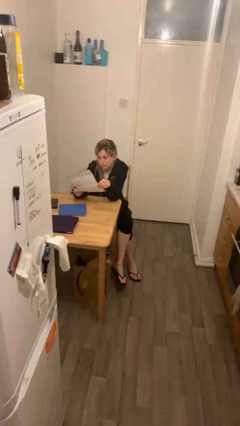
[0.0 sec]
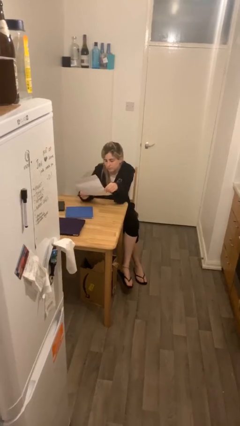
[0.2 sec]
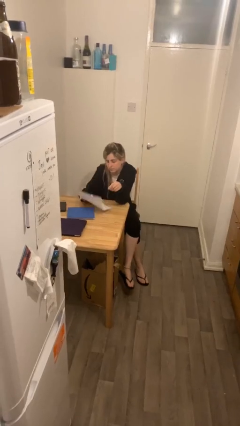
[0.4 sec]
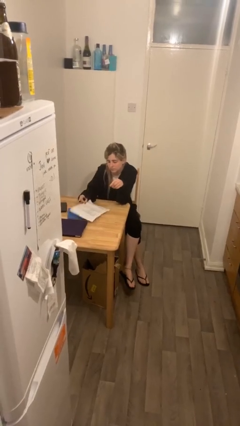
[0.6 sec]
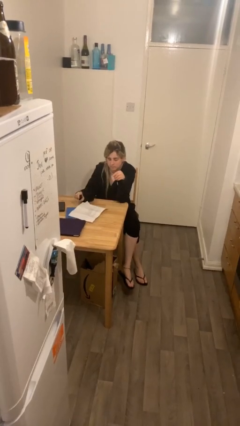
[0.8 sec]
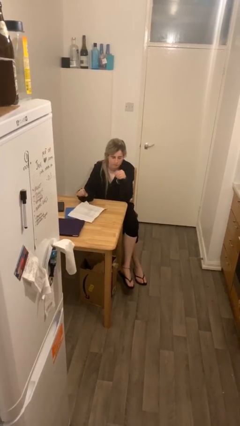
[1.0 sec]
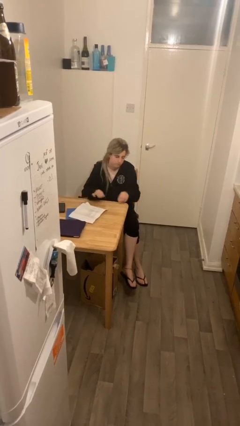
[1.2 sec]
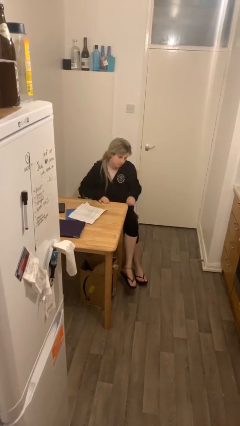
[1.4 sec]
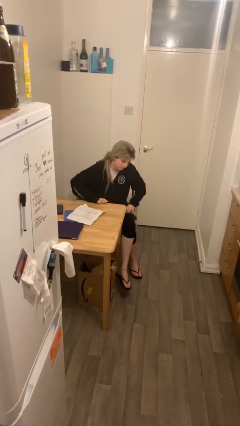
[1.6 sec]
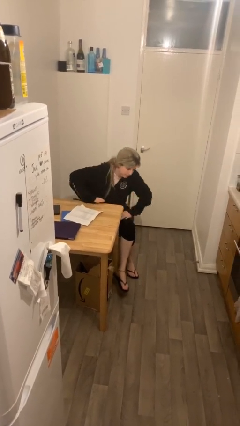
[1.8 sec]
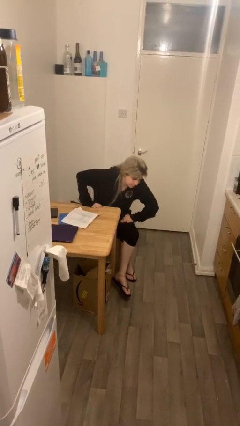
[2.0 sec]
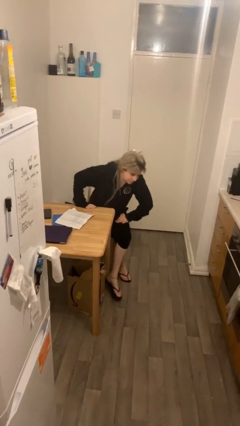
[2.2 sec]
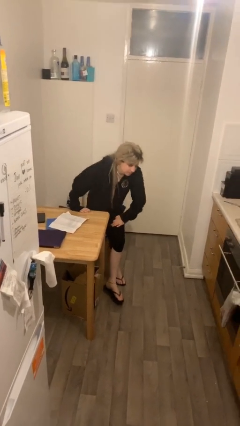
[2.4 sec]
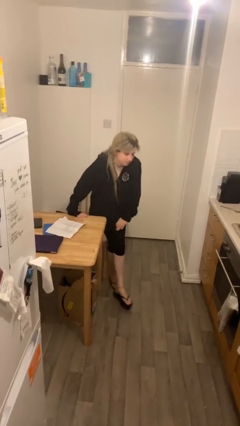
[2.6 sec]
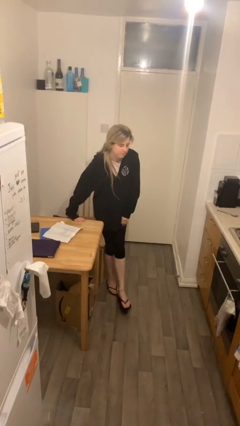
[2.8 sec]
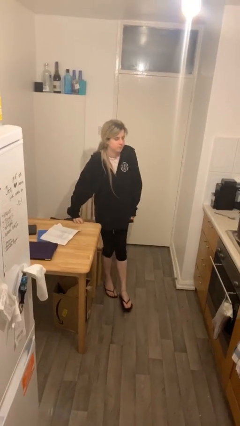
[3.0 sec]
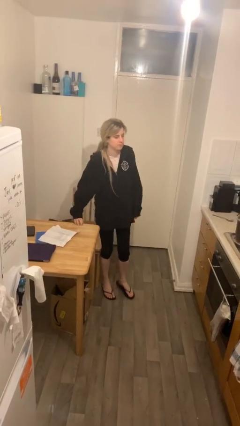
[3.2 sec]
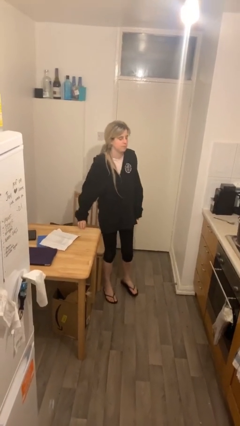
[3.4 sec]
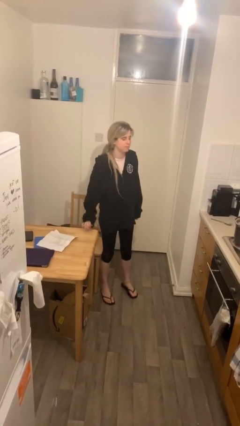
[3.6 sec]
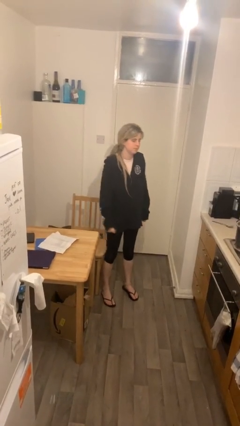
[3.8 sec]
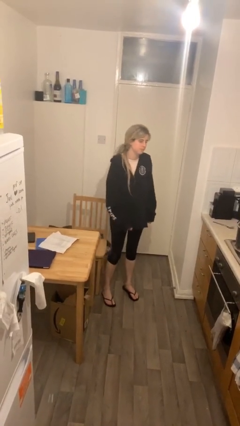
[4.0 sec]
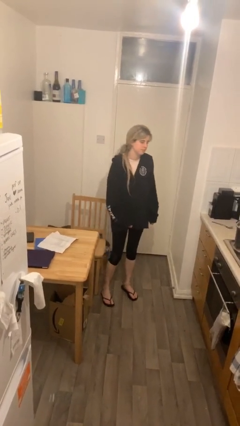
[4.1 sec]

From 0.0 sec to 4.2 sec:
person stands up

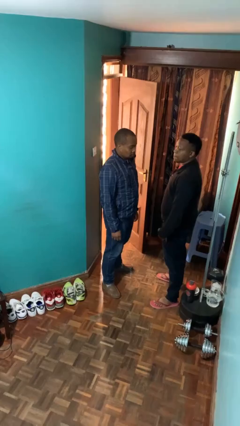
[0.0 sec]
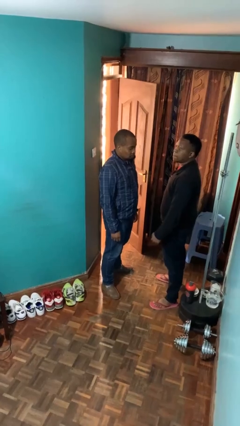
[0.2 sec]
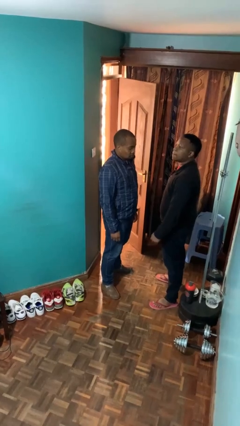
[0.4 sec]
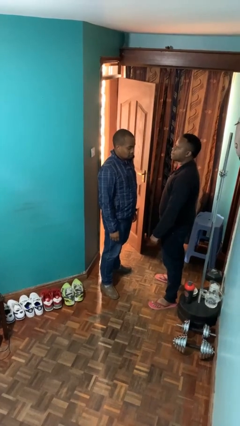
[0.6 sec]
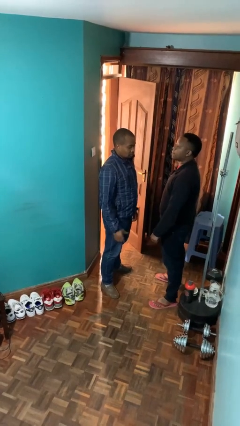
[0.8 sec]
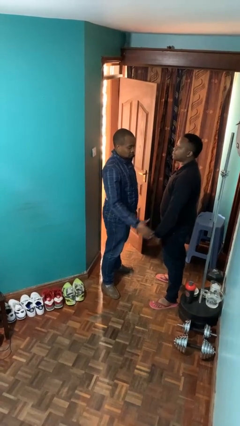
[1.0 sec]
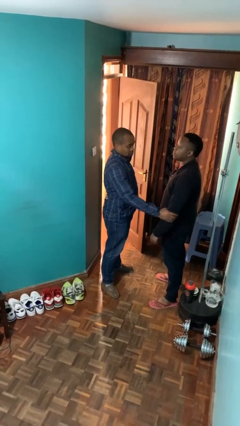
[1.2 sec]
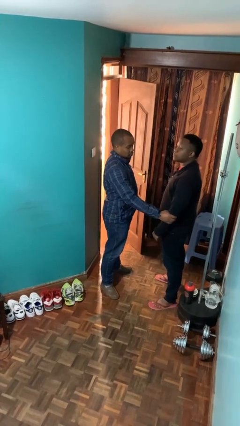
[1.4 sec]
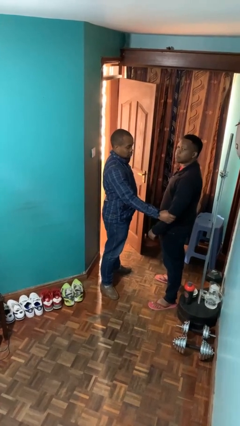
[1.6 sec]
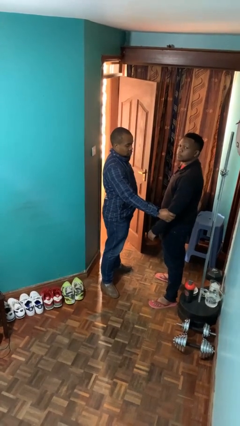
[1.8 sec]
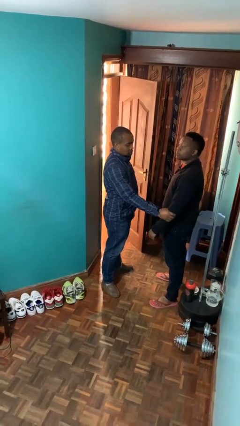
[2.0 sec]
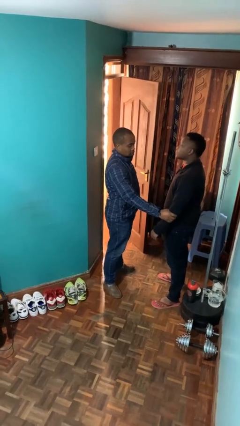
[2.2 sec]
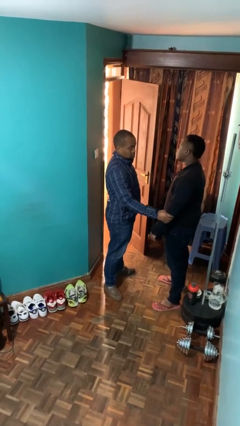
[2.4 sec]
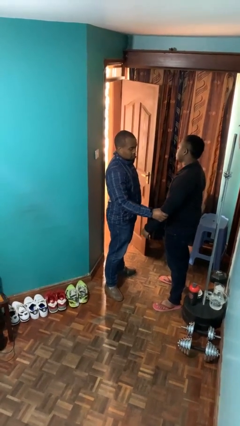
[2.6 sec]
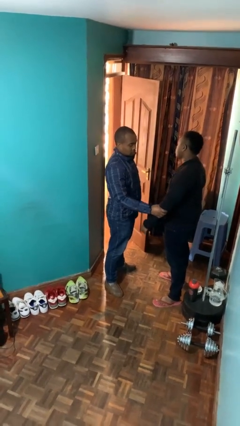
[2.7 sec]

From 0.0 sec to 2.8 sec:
person grabs person by forearm

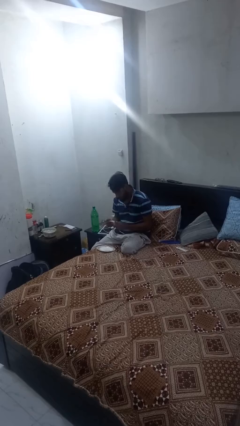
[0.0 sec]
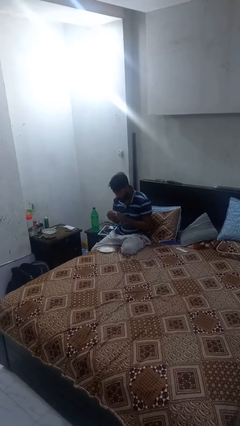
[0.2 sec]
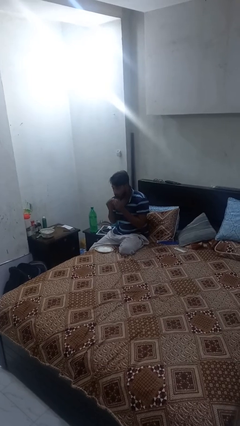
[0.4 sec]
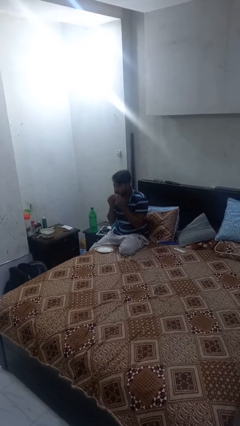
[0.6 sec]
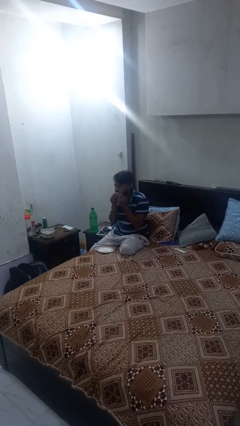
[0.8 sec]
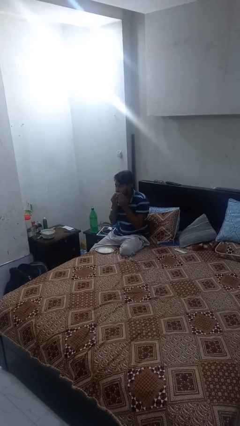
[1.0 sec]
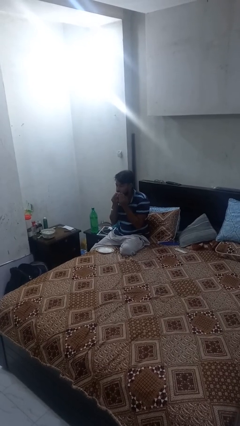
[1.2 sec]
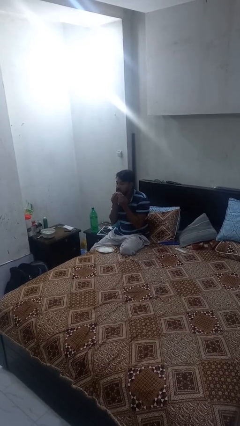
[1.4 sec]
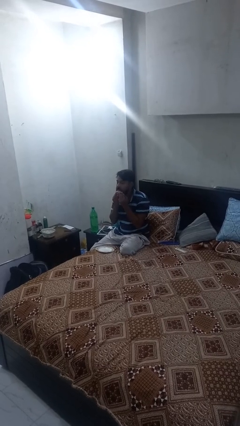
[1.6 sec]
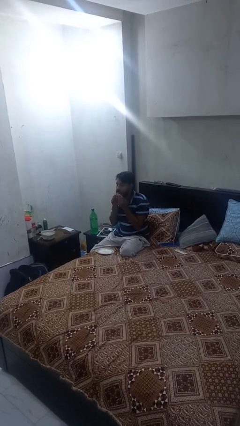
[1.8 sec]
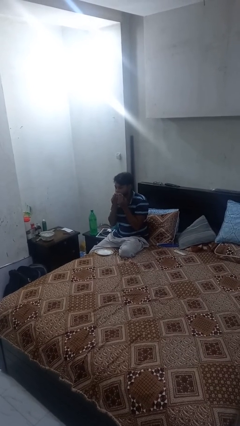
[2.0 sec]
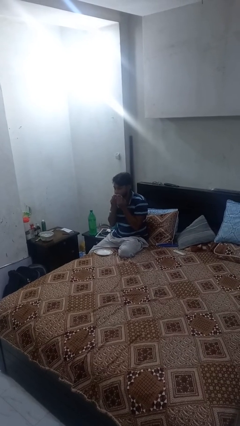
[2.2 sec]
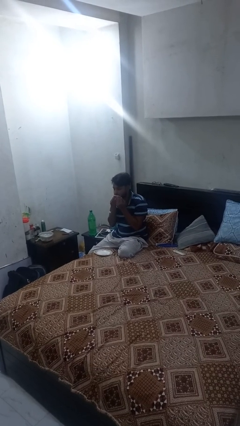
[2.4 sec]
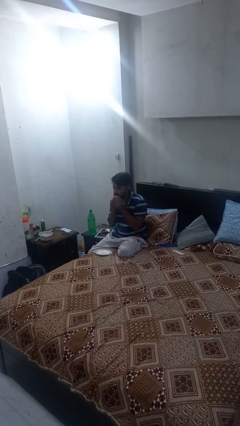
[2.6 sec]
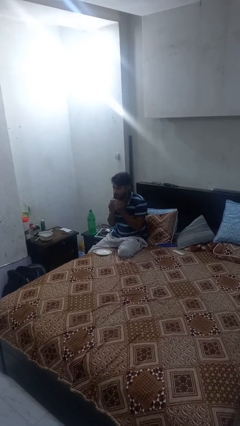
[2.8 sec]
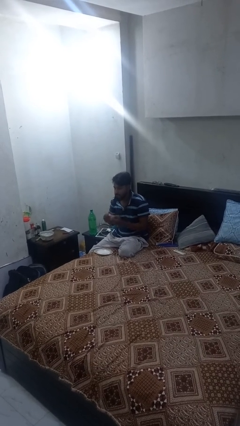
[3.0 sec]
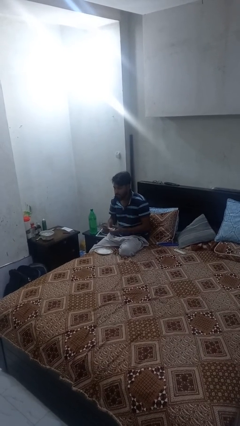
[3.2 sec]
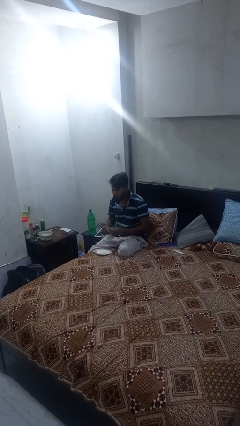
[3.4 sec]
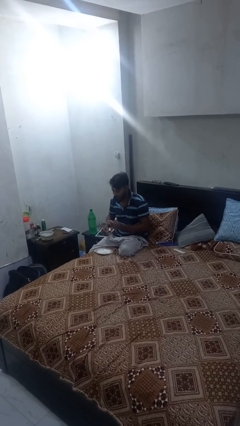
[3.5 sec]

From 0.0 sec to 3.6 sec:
person wipes mouth with napkin

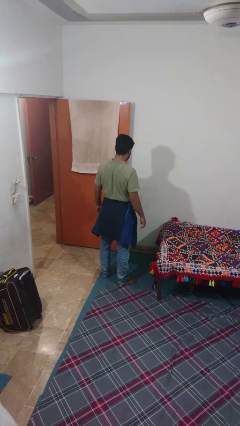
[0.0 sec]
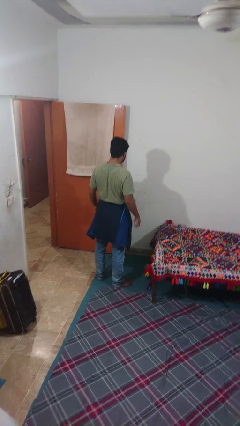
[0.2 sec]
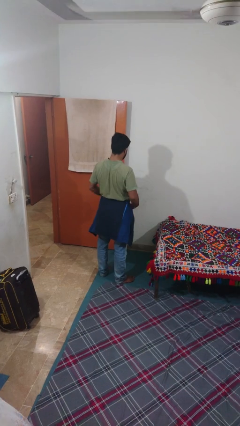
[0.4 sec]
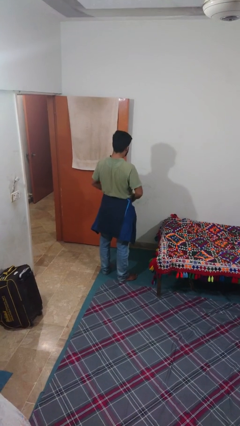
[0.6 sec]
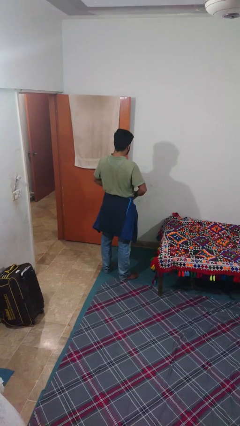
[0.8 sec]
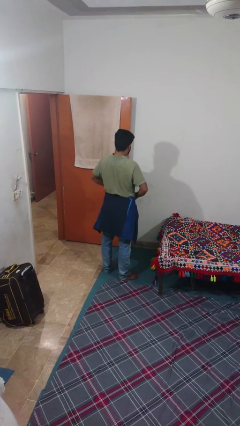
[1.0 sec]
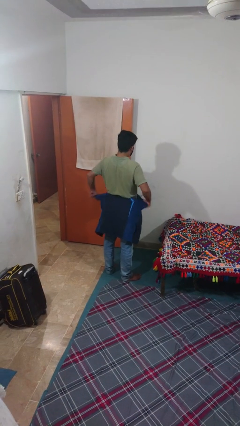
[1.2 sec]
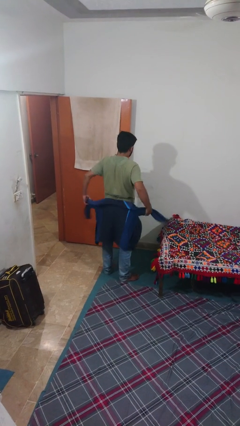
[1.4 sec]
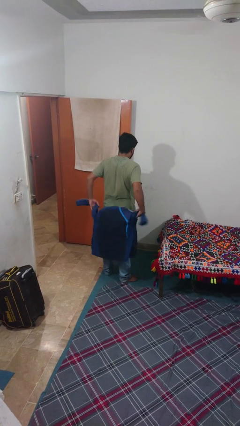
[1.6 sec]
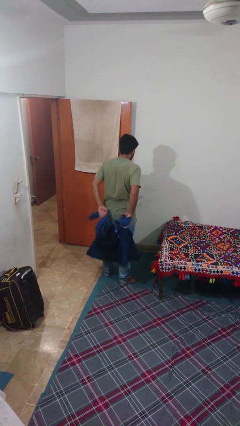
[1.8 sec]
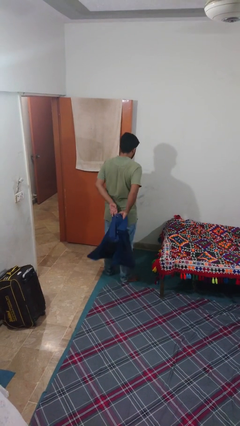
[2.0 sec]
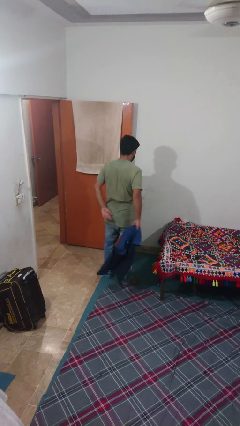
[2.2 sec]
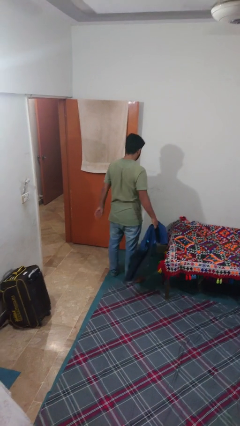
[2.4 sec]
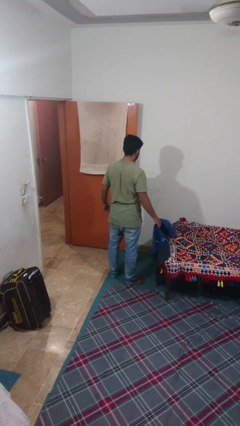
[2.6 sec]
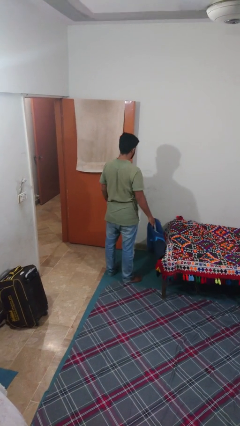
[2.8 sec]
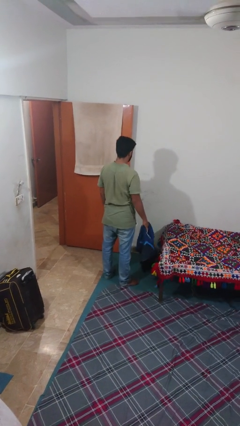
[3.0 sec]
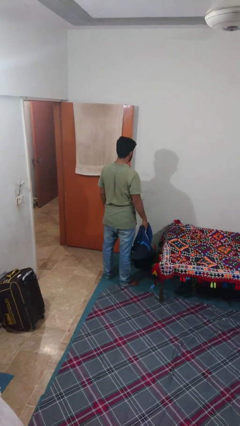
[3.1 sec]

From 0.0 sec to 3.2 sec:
person unties jacket around waist

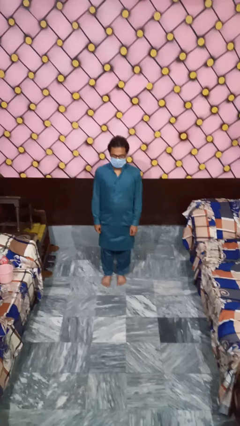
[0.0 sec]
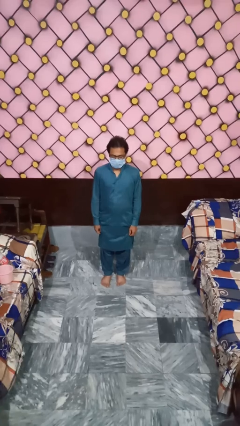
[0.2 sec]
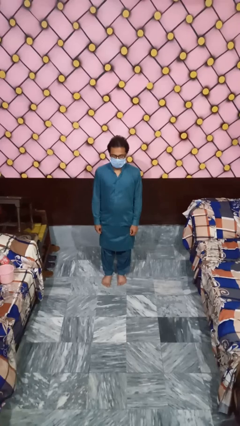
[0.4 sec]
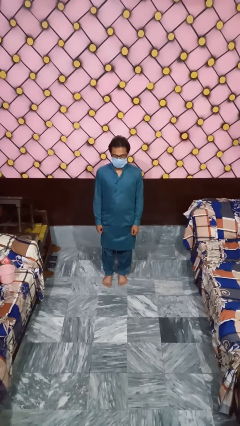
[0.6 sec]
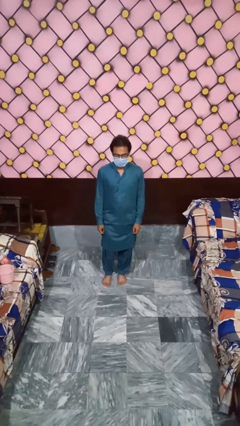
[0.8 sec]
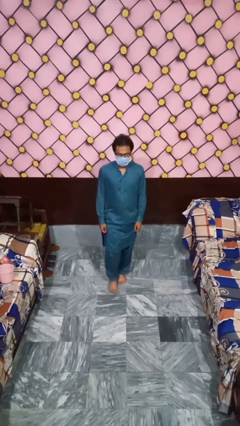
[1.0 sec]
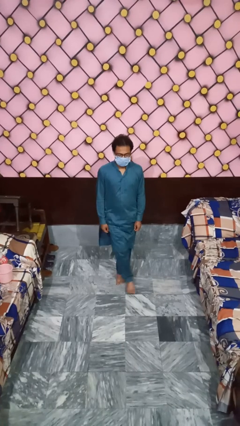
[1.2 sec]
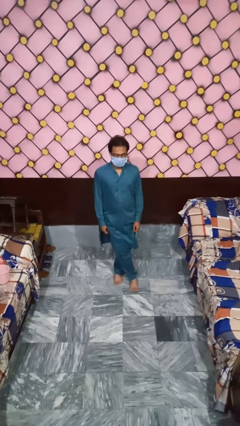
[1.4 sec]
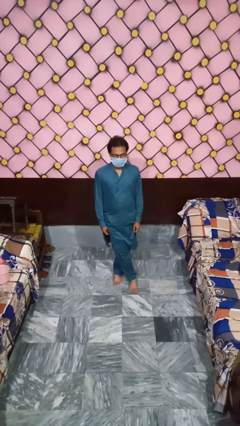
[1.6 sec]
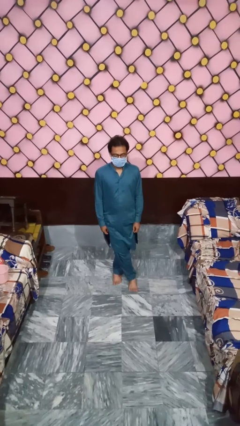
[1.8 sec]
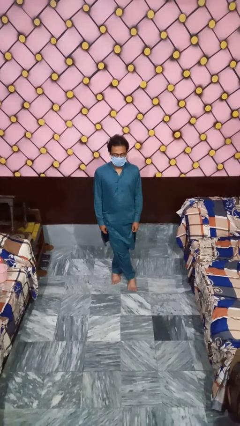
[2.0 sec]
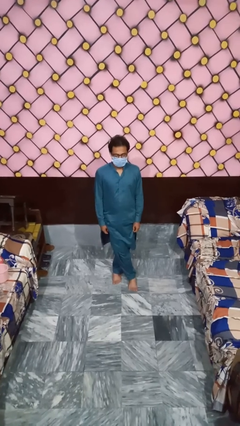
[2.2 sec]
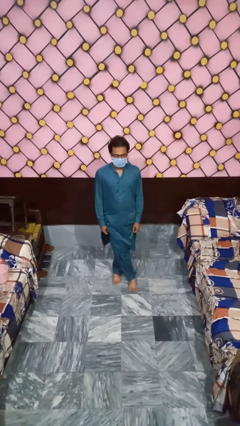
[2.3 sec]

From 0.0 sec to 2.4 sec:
person crosses legs

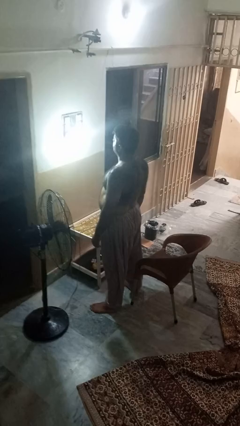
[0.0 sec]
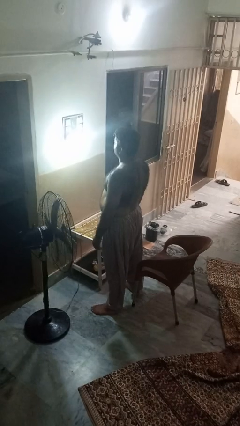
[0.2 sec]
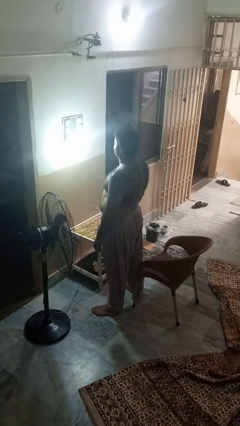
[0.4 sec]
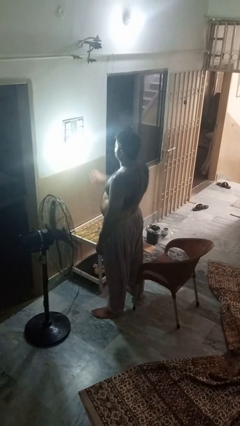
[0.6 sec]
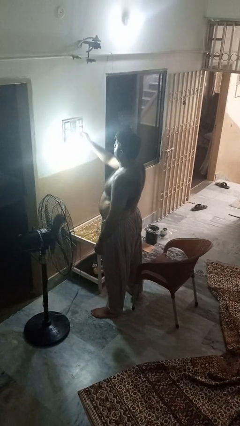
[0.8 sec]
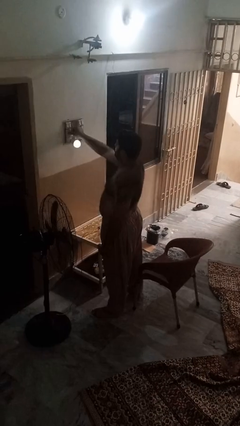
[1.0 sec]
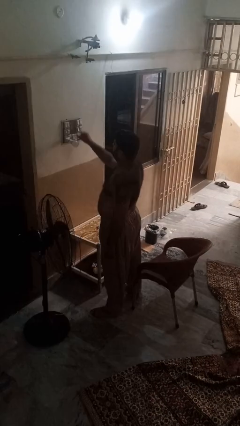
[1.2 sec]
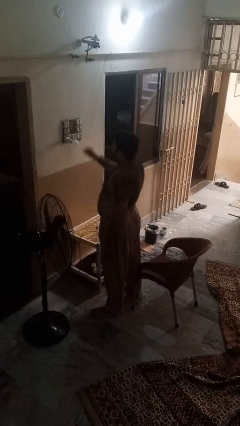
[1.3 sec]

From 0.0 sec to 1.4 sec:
person turns off lamp
